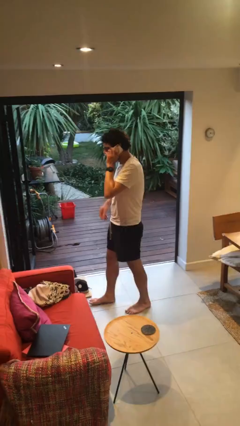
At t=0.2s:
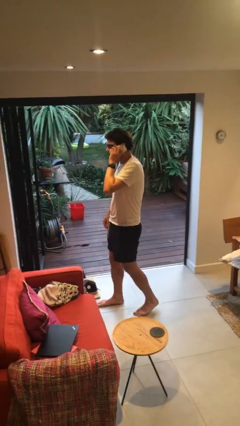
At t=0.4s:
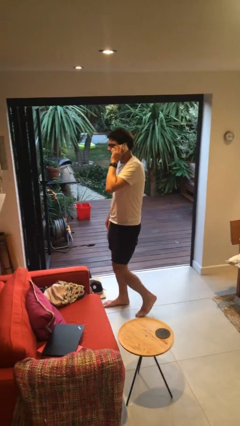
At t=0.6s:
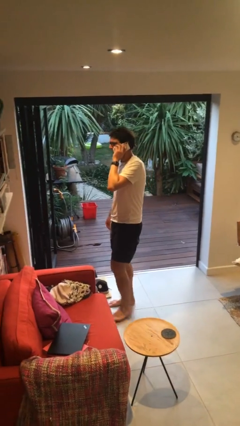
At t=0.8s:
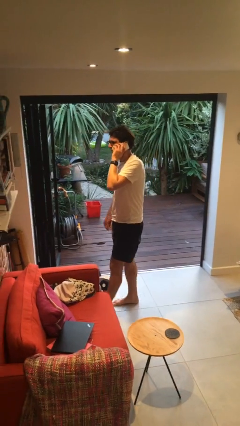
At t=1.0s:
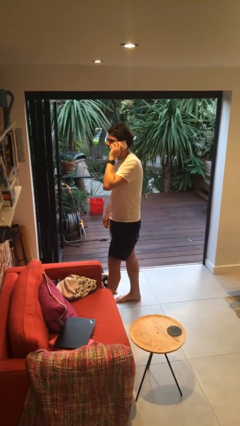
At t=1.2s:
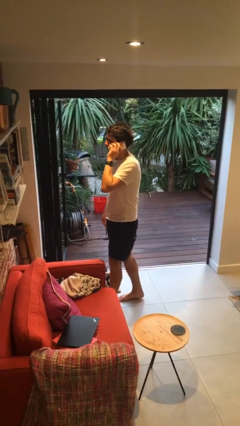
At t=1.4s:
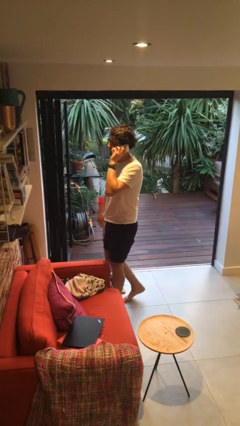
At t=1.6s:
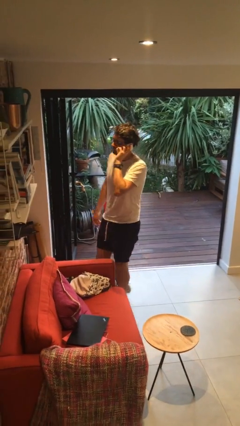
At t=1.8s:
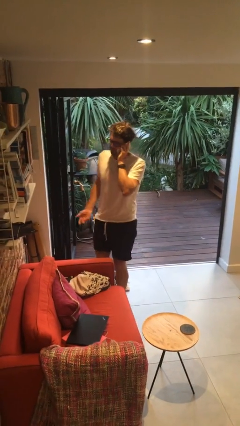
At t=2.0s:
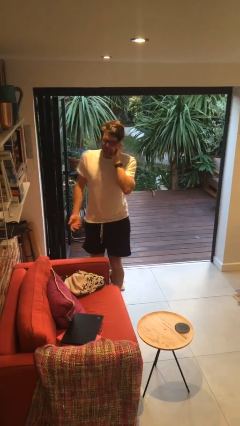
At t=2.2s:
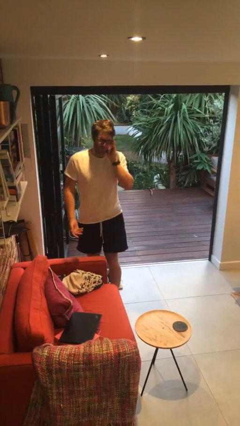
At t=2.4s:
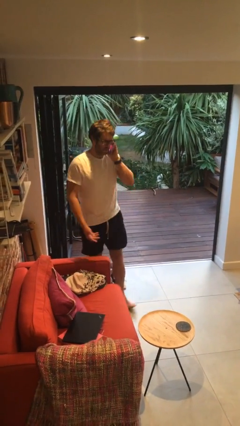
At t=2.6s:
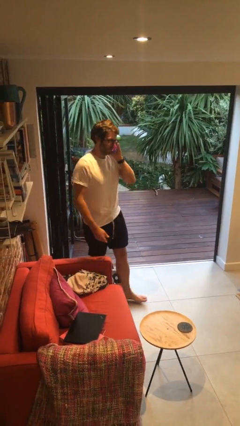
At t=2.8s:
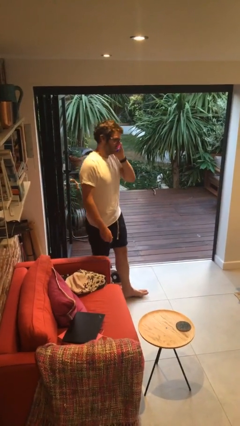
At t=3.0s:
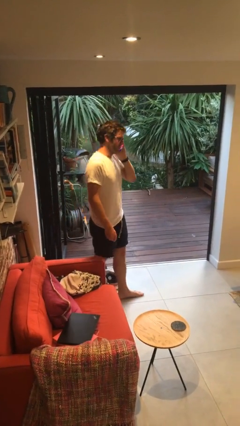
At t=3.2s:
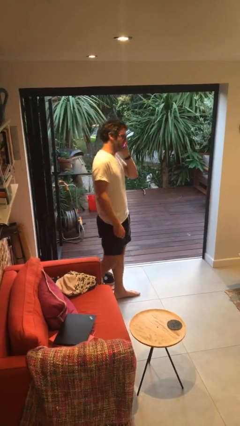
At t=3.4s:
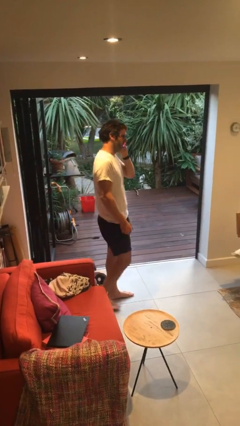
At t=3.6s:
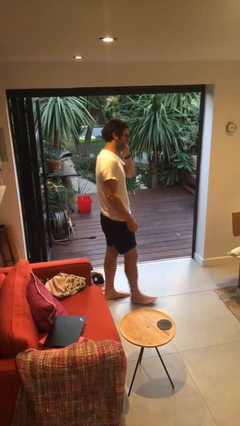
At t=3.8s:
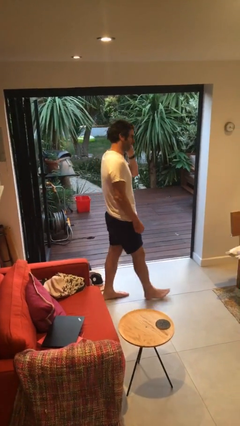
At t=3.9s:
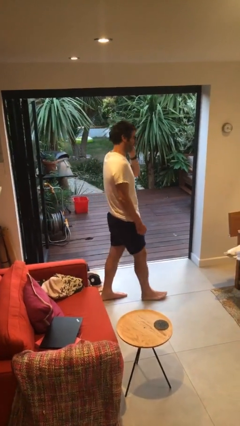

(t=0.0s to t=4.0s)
person talks on phone

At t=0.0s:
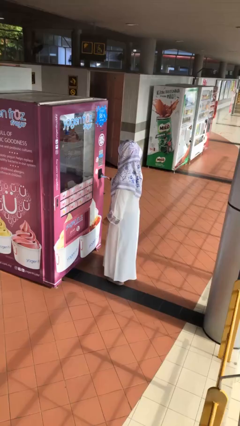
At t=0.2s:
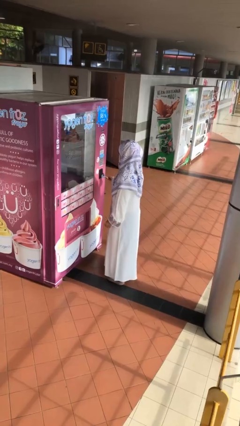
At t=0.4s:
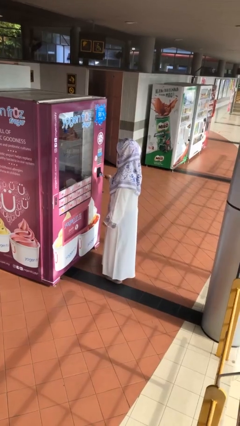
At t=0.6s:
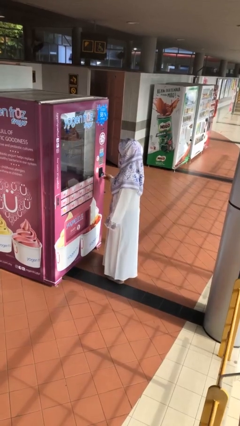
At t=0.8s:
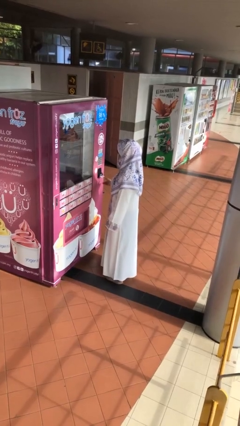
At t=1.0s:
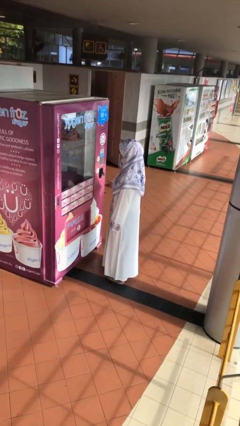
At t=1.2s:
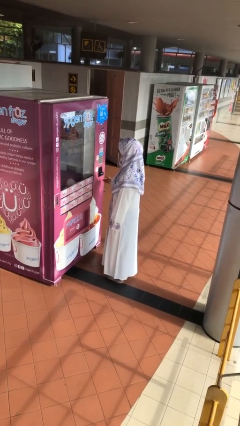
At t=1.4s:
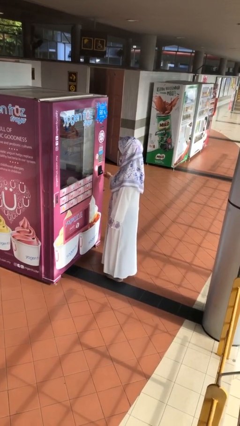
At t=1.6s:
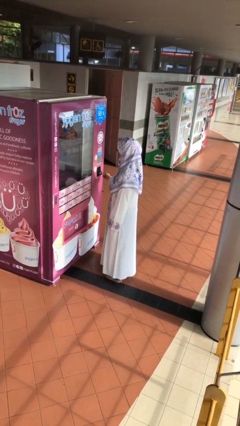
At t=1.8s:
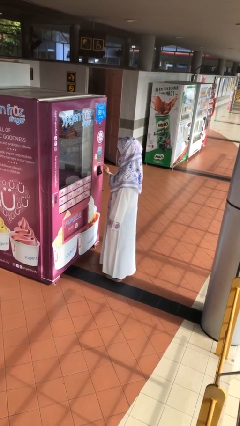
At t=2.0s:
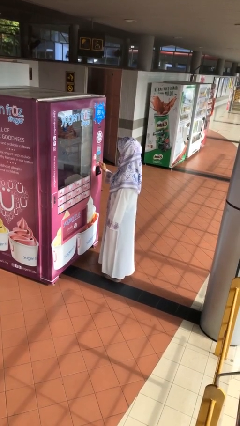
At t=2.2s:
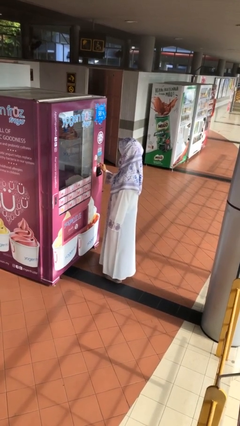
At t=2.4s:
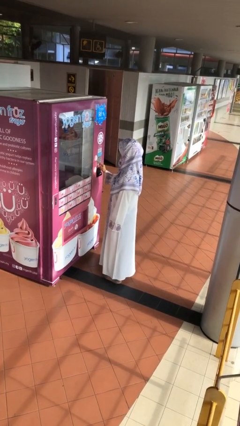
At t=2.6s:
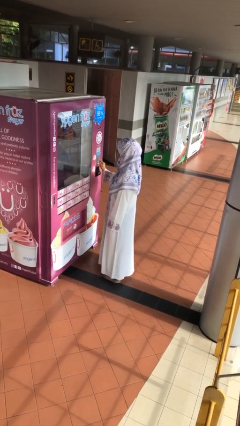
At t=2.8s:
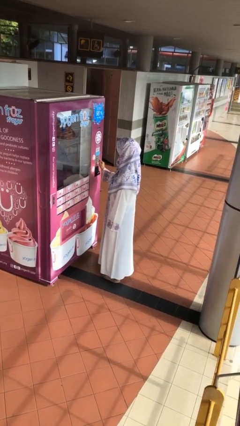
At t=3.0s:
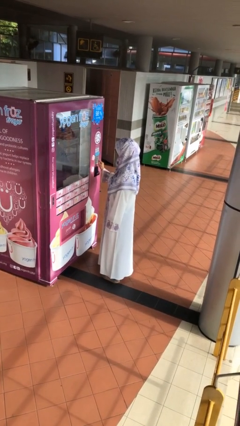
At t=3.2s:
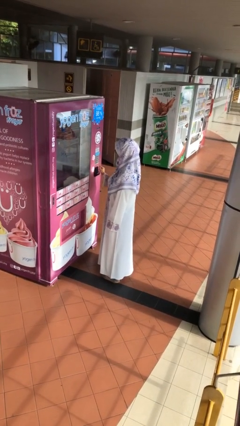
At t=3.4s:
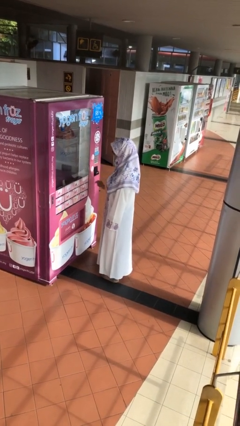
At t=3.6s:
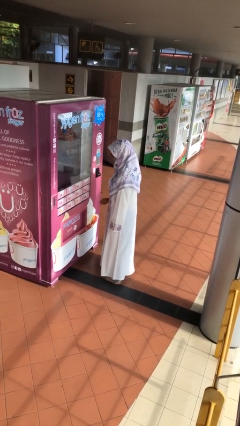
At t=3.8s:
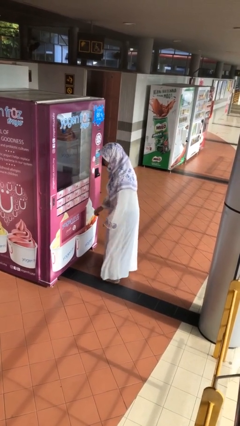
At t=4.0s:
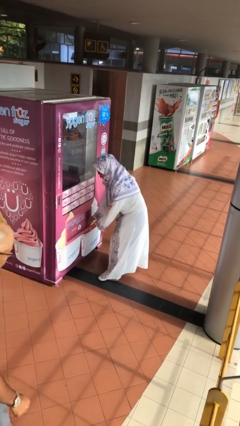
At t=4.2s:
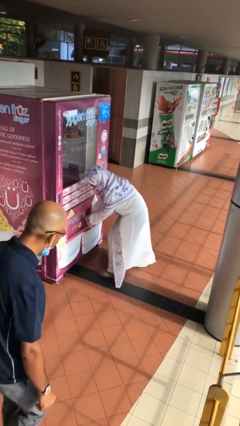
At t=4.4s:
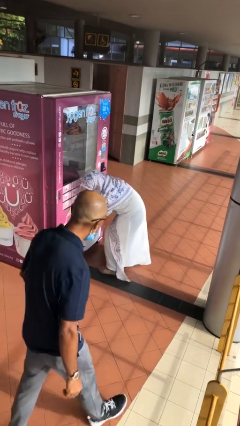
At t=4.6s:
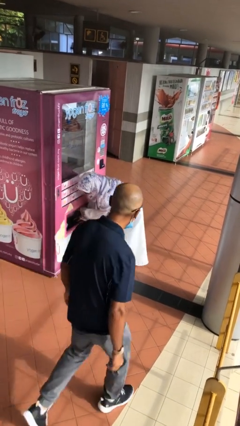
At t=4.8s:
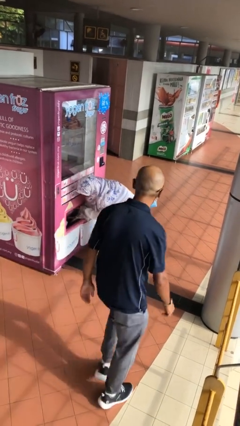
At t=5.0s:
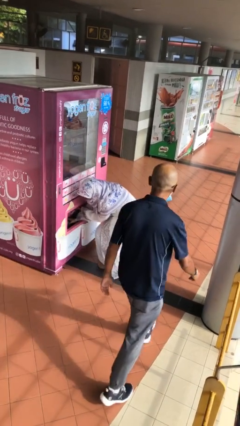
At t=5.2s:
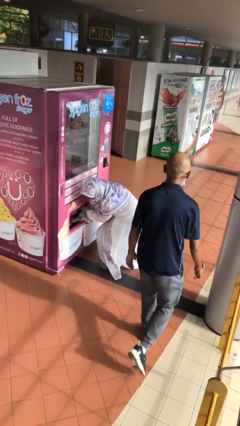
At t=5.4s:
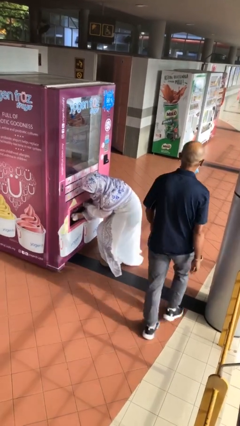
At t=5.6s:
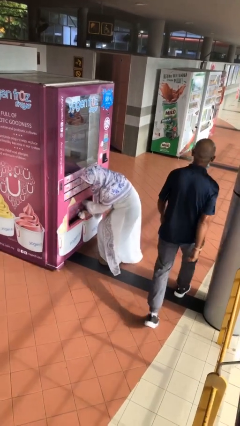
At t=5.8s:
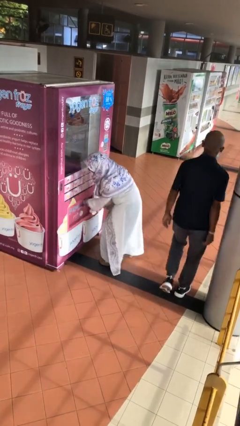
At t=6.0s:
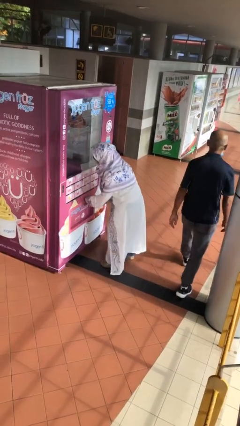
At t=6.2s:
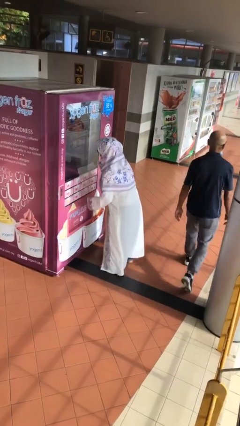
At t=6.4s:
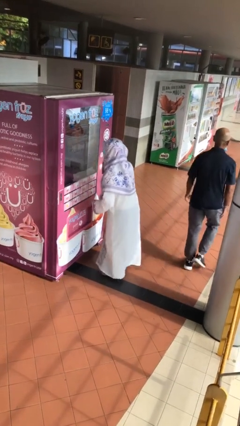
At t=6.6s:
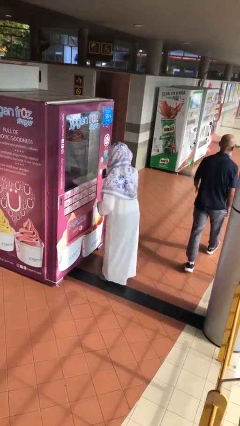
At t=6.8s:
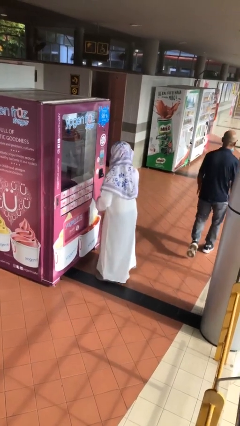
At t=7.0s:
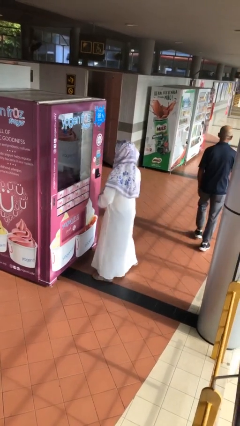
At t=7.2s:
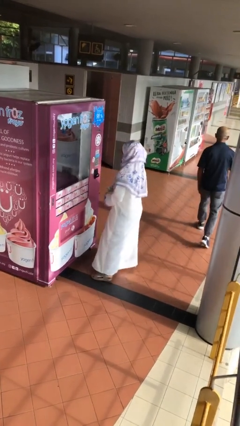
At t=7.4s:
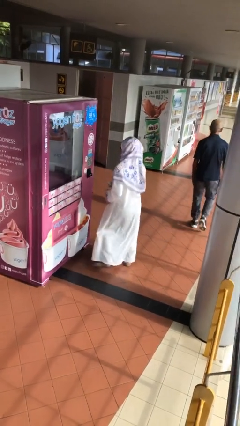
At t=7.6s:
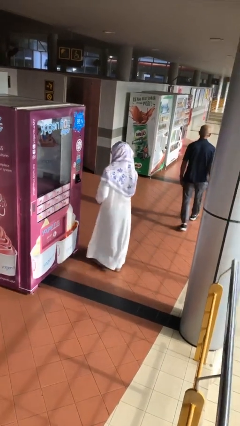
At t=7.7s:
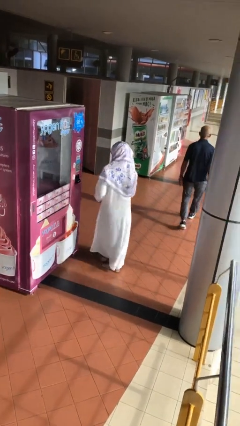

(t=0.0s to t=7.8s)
person purchases from machine

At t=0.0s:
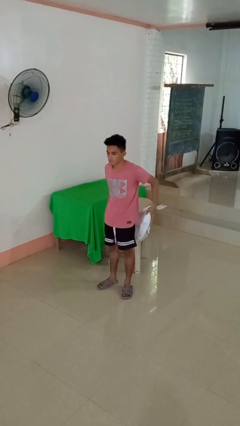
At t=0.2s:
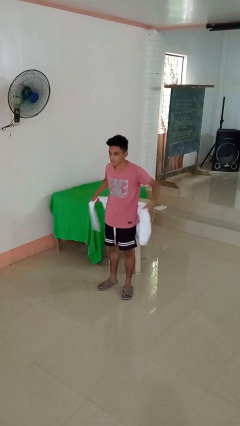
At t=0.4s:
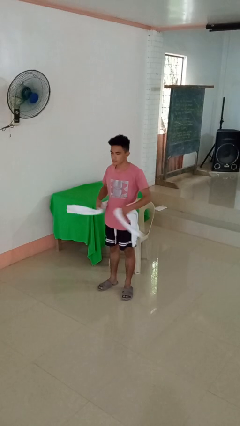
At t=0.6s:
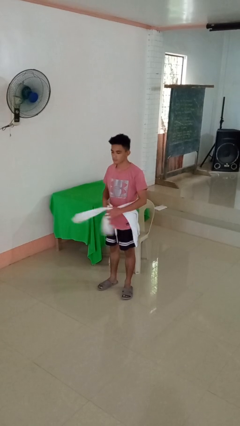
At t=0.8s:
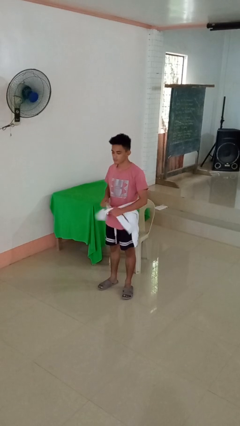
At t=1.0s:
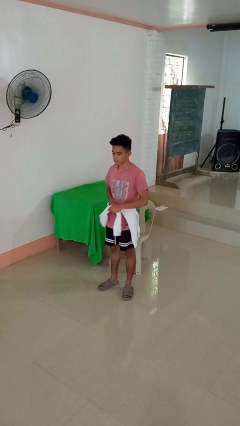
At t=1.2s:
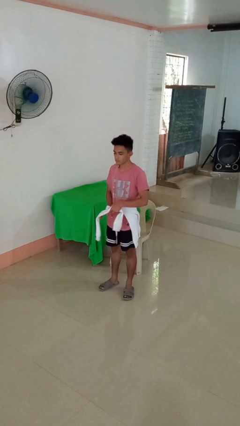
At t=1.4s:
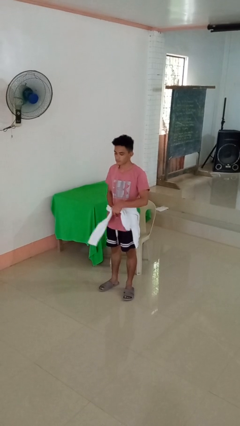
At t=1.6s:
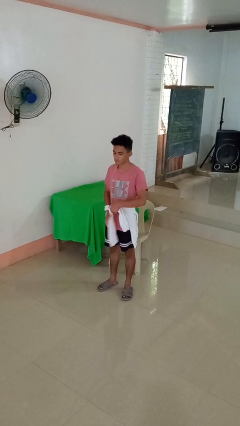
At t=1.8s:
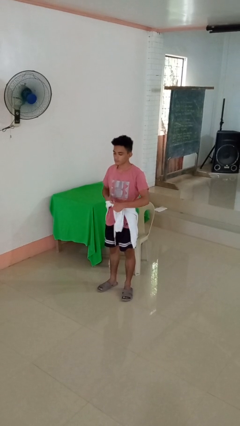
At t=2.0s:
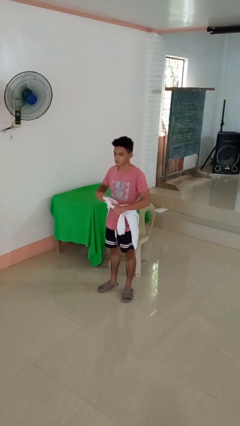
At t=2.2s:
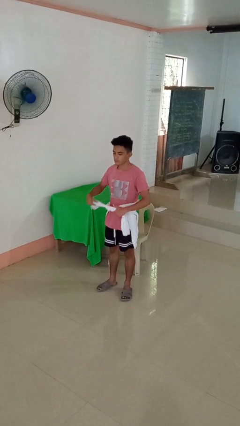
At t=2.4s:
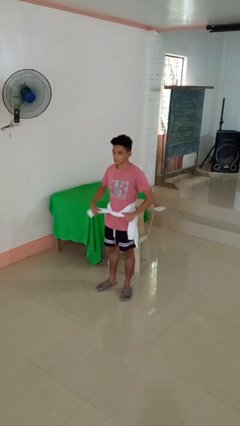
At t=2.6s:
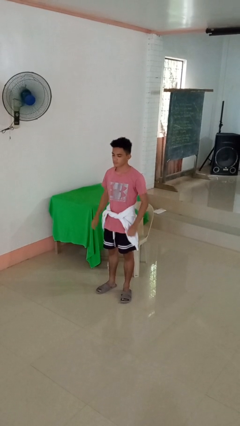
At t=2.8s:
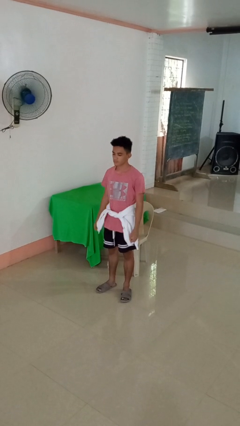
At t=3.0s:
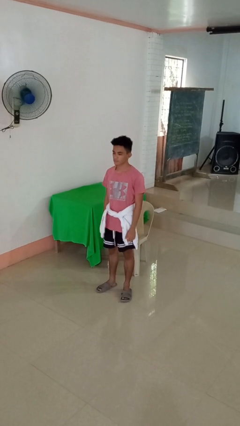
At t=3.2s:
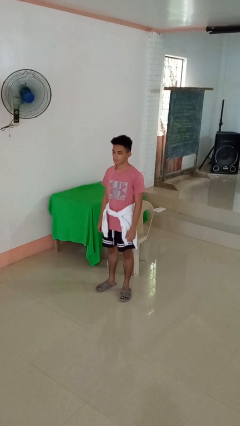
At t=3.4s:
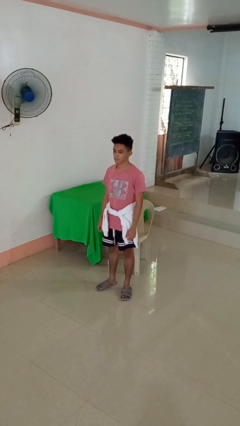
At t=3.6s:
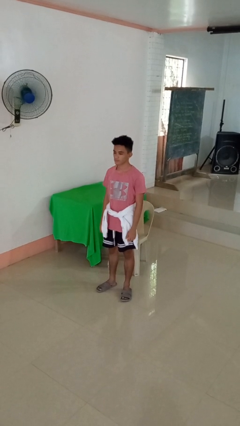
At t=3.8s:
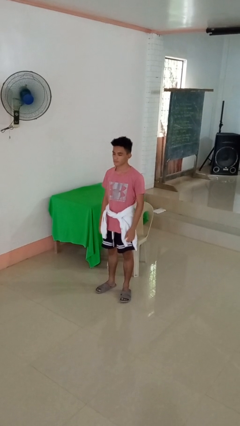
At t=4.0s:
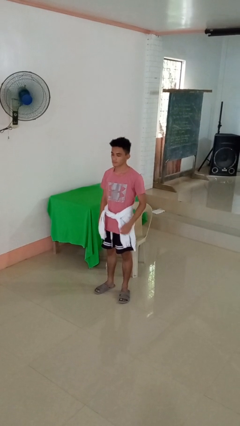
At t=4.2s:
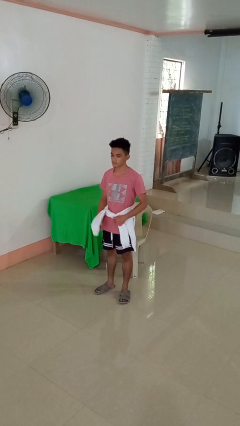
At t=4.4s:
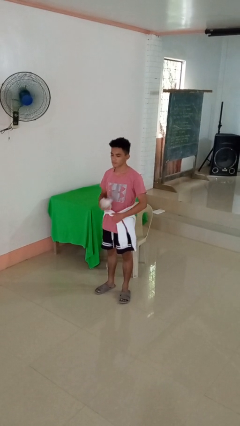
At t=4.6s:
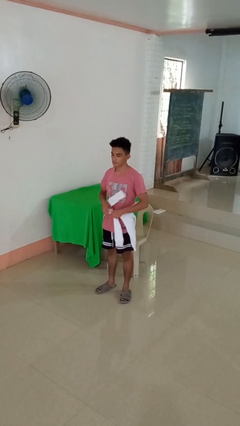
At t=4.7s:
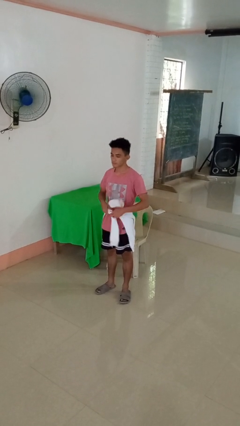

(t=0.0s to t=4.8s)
person ties jacket around waist

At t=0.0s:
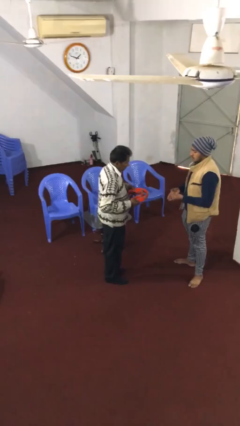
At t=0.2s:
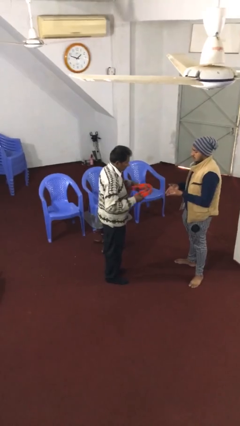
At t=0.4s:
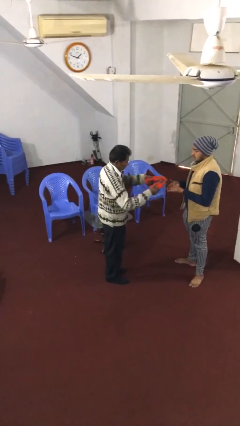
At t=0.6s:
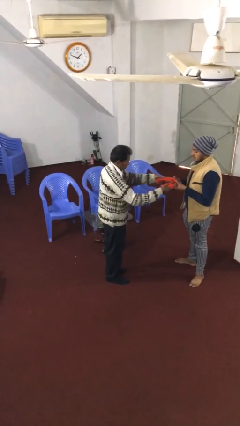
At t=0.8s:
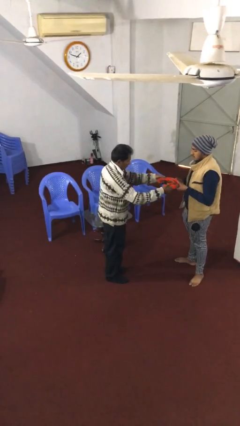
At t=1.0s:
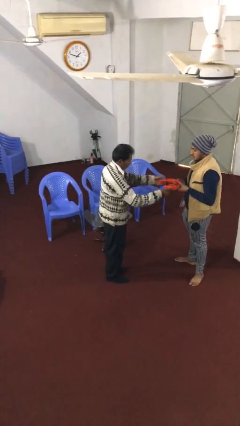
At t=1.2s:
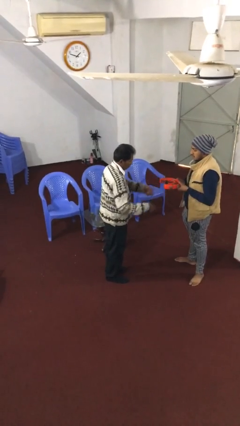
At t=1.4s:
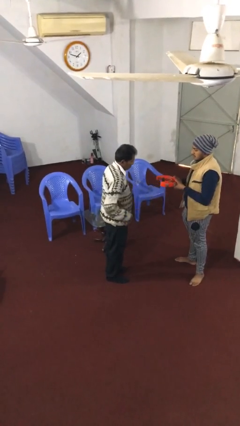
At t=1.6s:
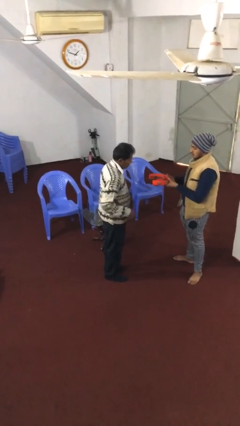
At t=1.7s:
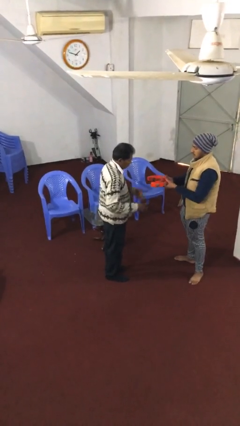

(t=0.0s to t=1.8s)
person transfers object to person
